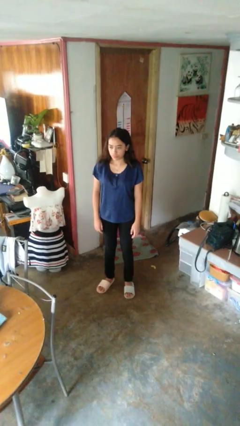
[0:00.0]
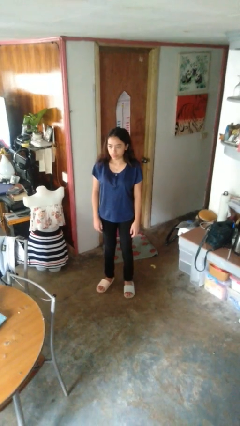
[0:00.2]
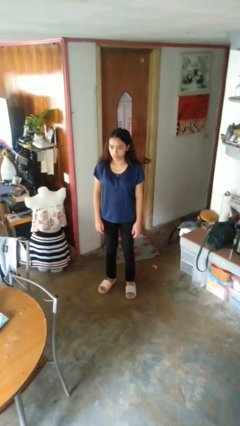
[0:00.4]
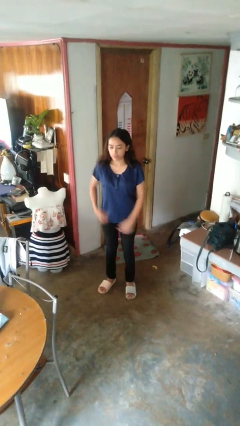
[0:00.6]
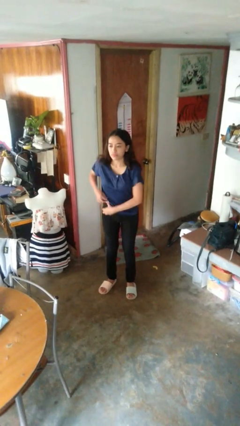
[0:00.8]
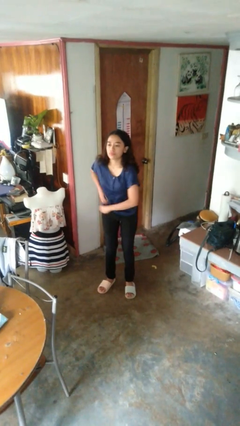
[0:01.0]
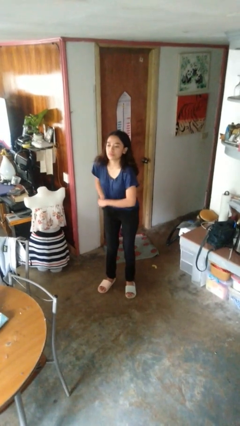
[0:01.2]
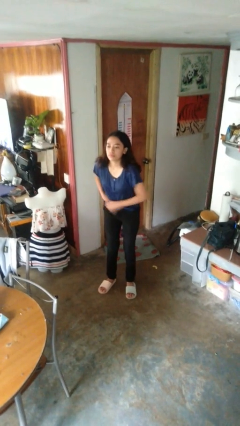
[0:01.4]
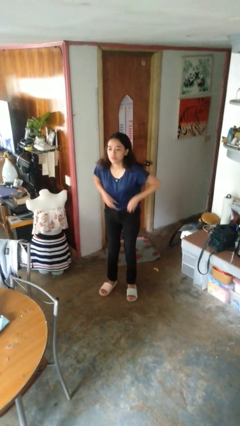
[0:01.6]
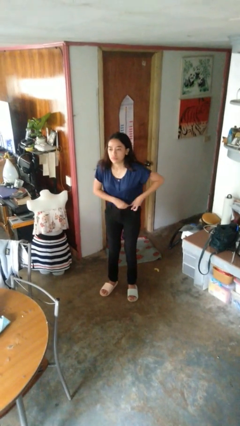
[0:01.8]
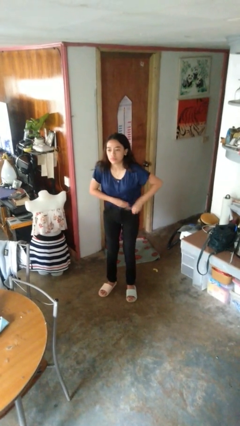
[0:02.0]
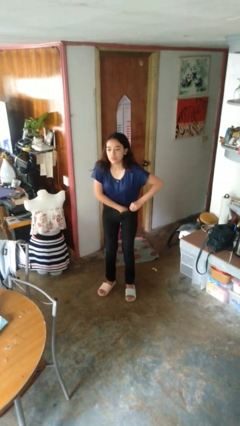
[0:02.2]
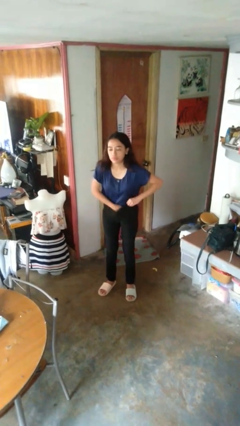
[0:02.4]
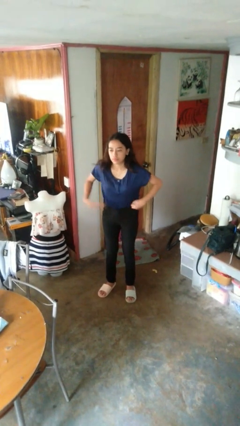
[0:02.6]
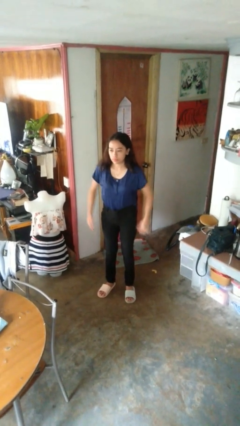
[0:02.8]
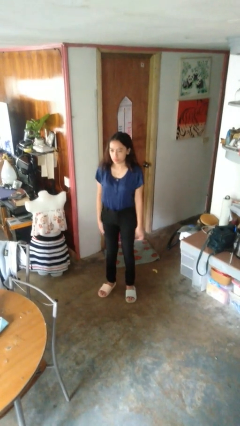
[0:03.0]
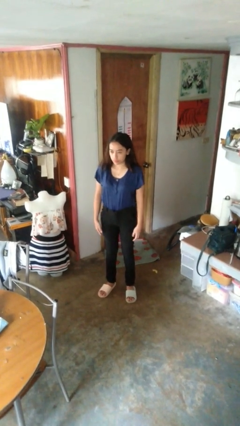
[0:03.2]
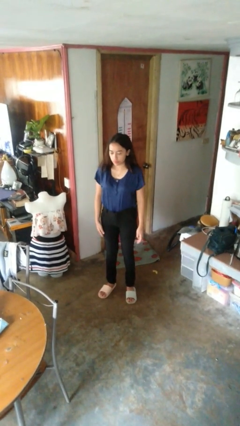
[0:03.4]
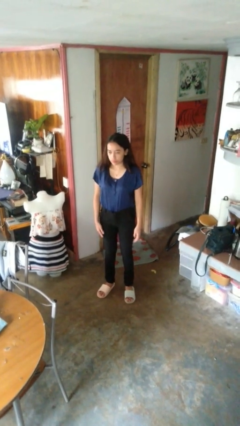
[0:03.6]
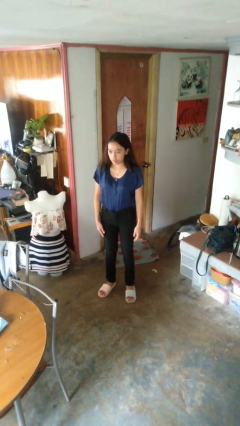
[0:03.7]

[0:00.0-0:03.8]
person tucks in shirt

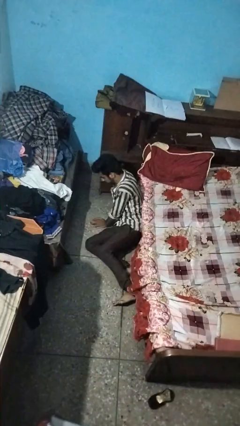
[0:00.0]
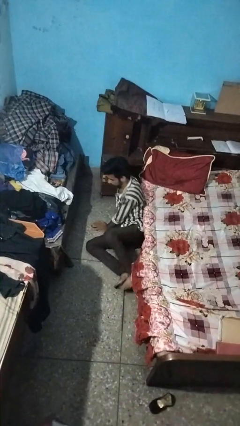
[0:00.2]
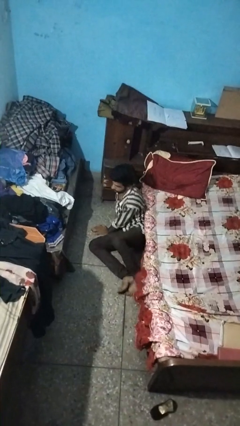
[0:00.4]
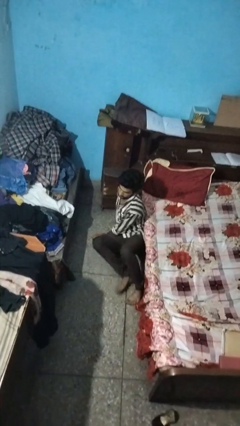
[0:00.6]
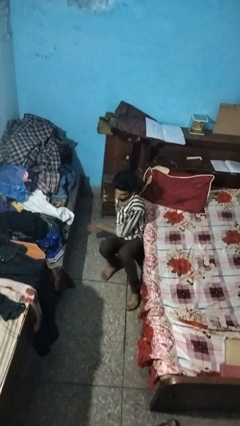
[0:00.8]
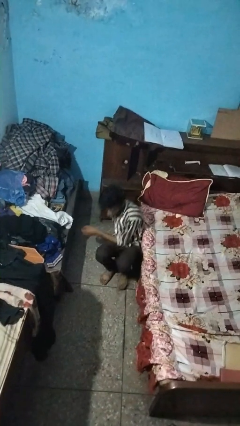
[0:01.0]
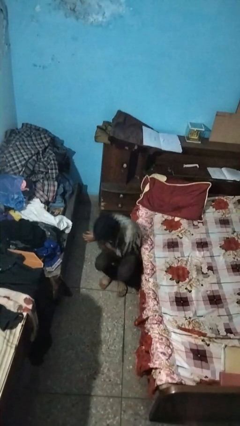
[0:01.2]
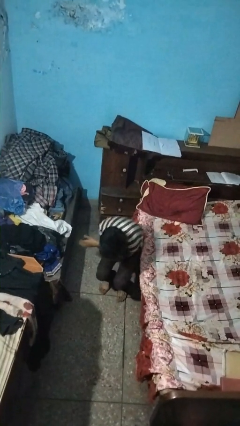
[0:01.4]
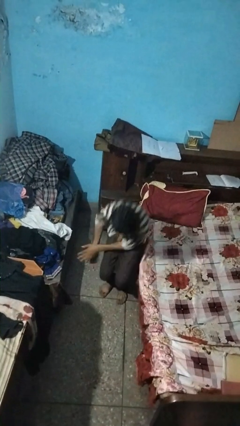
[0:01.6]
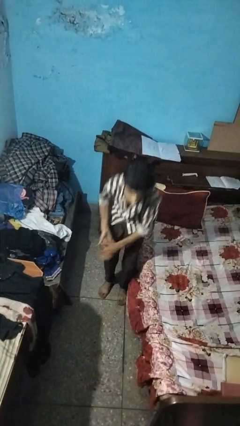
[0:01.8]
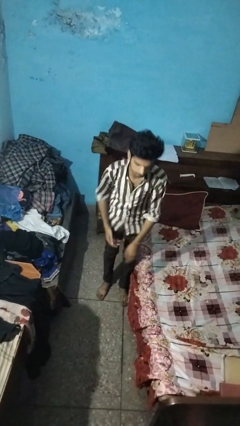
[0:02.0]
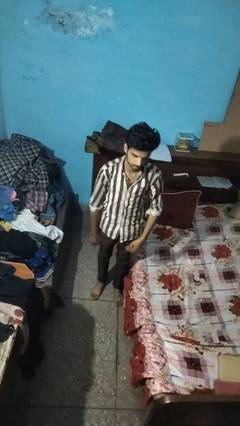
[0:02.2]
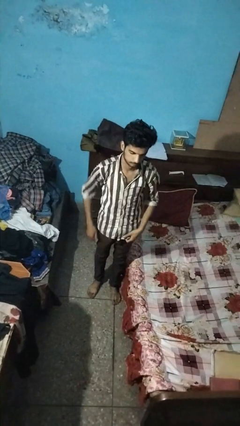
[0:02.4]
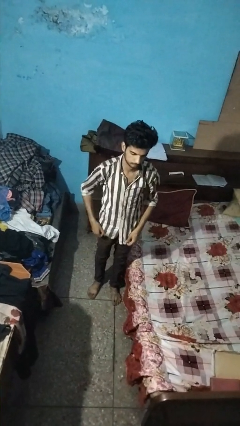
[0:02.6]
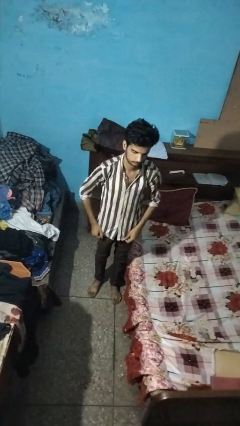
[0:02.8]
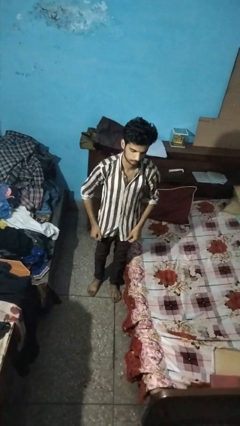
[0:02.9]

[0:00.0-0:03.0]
person stands up from floor

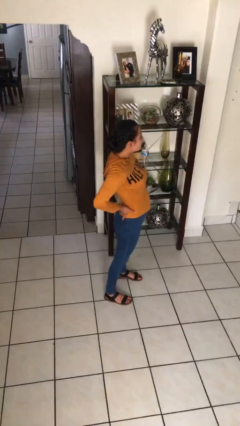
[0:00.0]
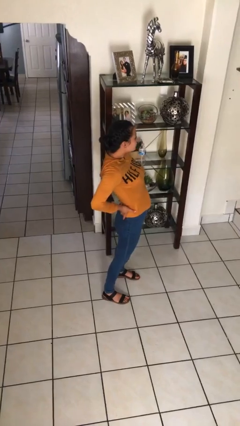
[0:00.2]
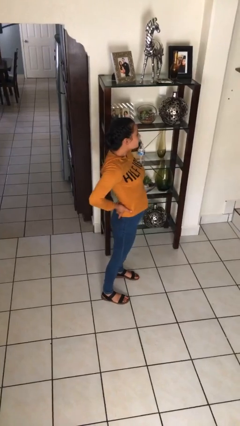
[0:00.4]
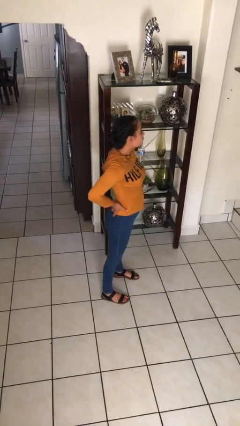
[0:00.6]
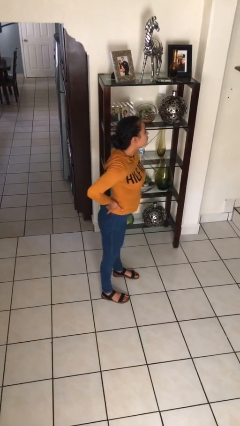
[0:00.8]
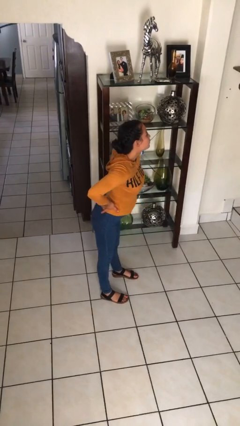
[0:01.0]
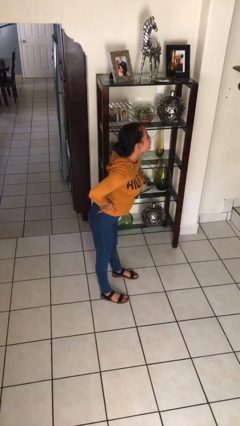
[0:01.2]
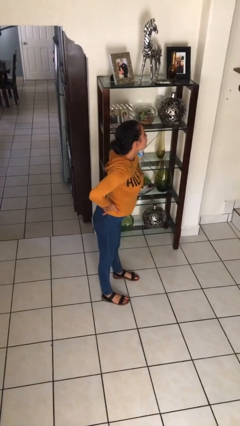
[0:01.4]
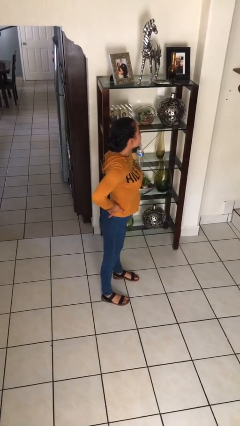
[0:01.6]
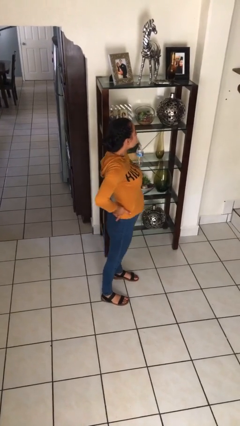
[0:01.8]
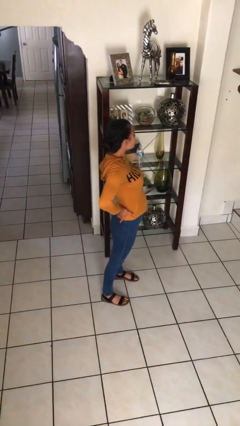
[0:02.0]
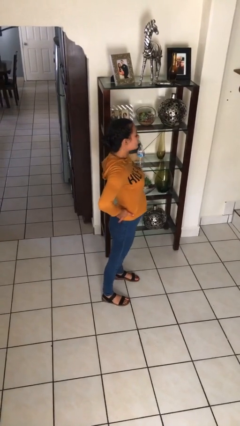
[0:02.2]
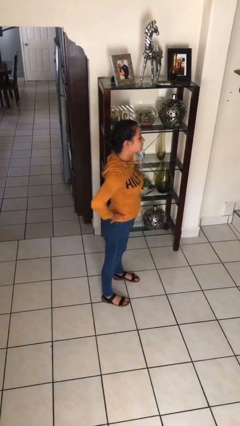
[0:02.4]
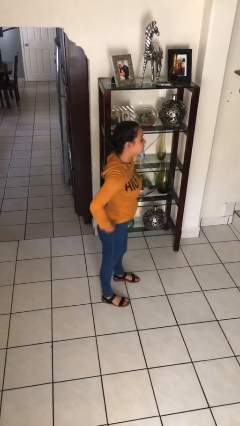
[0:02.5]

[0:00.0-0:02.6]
person wiggles hips

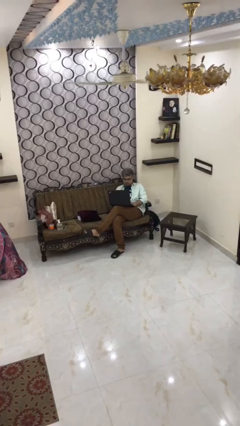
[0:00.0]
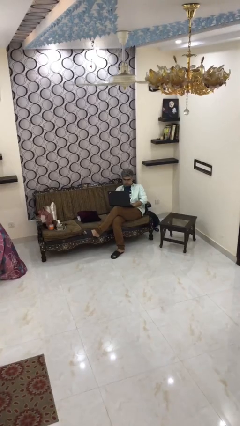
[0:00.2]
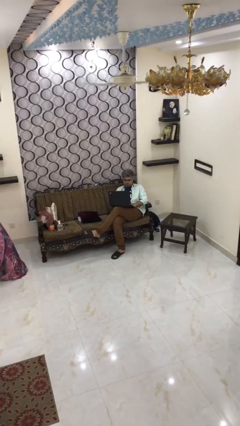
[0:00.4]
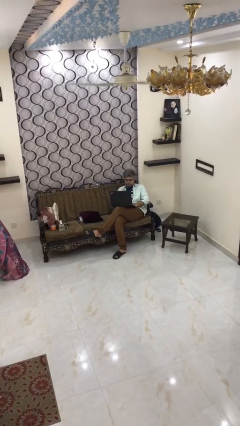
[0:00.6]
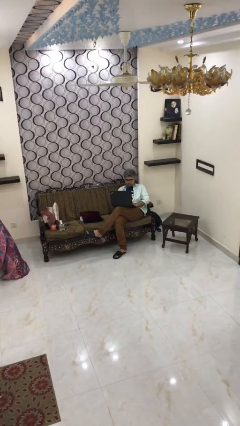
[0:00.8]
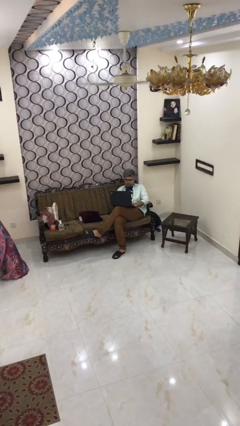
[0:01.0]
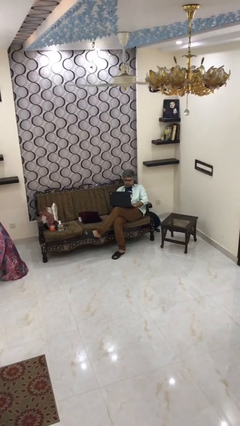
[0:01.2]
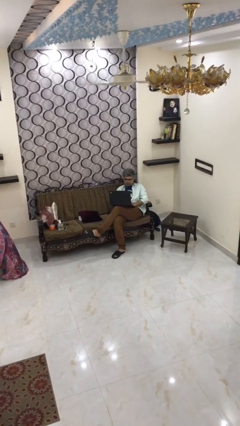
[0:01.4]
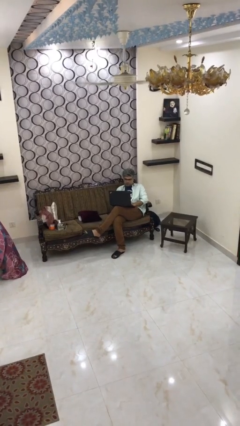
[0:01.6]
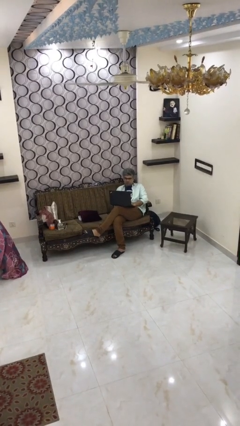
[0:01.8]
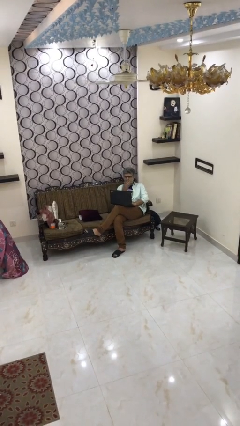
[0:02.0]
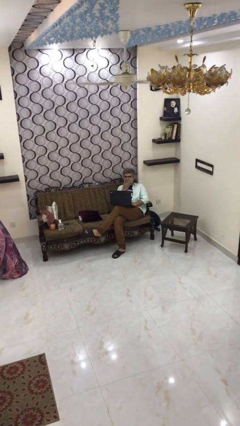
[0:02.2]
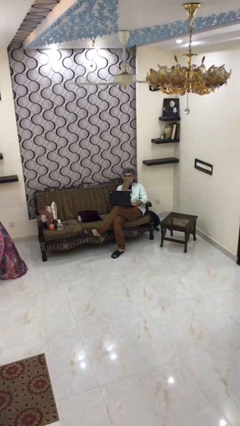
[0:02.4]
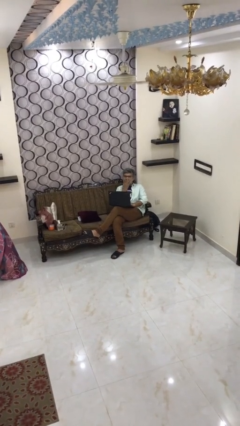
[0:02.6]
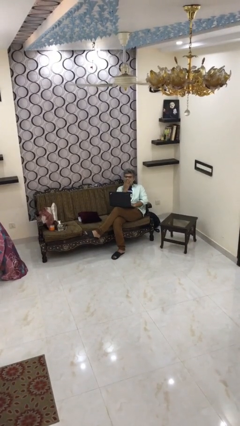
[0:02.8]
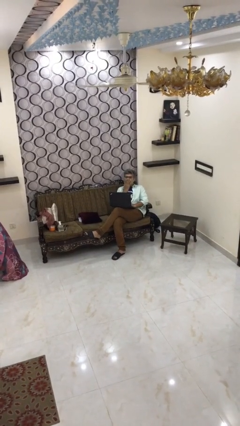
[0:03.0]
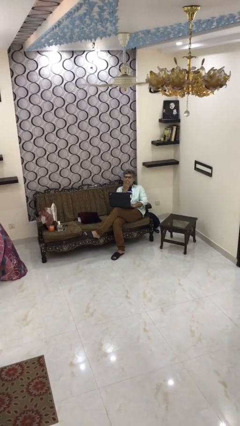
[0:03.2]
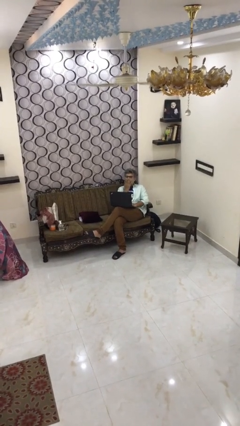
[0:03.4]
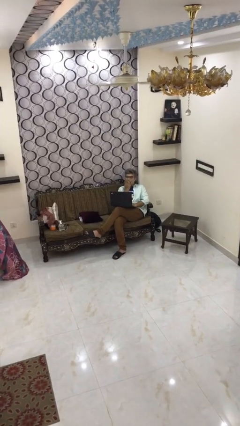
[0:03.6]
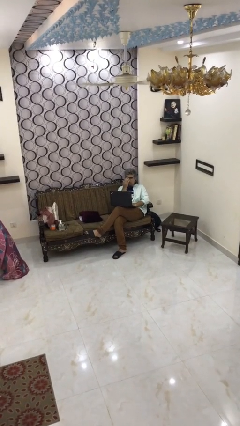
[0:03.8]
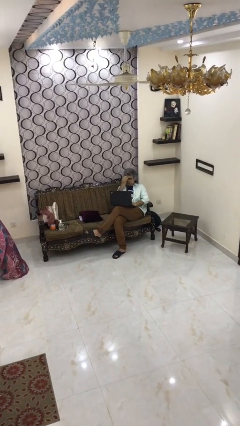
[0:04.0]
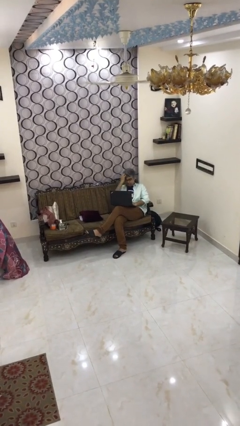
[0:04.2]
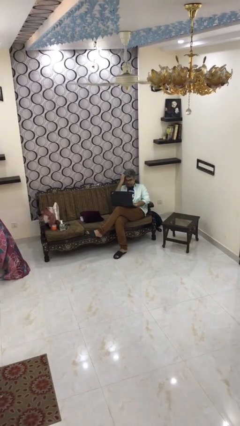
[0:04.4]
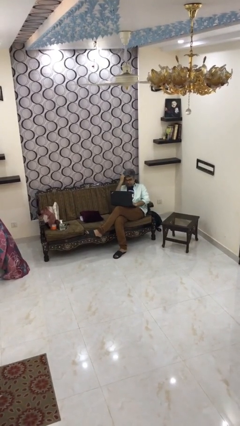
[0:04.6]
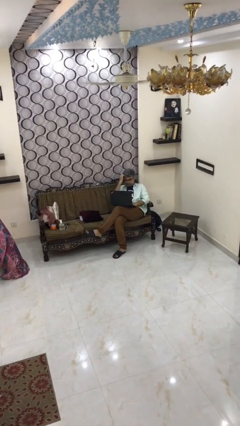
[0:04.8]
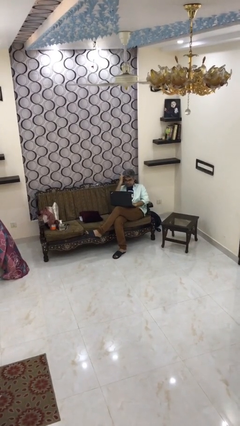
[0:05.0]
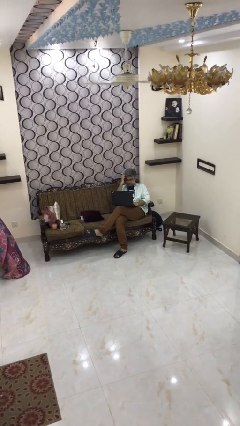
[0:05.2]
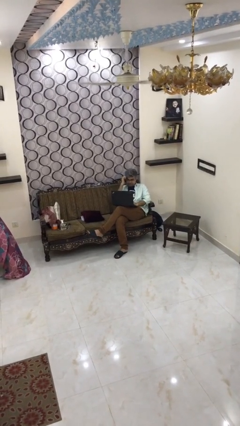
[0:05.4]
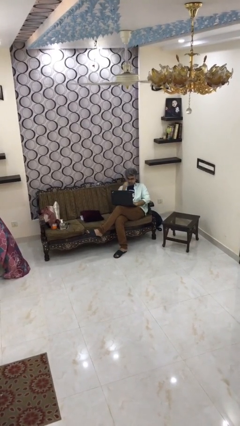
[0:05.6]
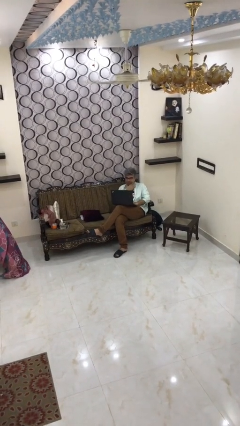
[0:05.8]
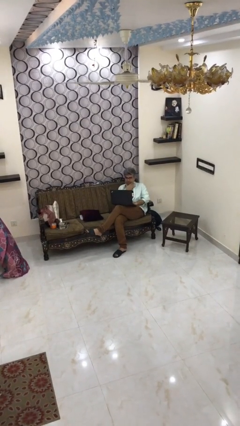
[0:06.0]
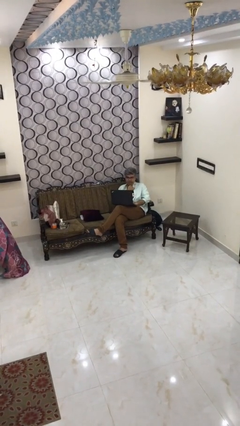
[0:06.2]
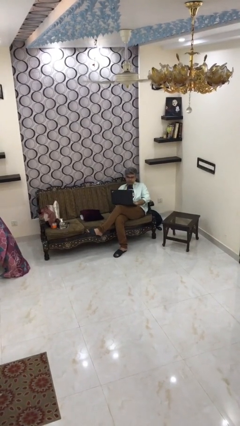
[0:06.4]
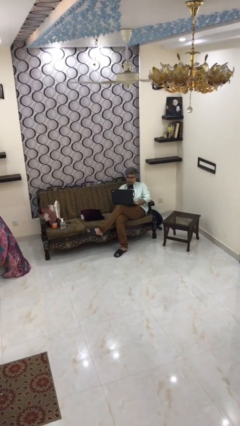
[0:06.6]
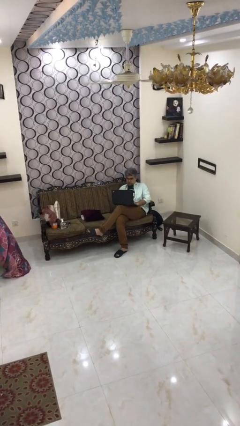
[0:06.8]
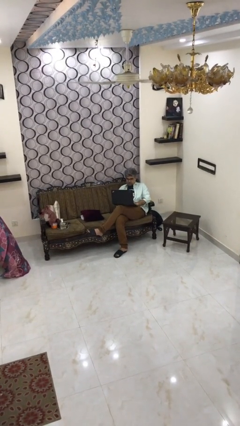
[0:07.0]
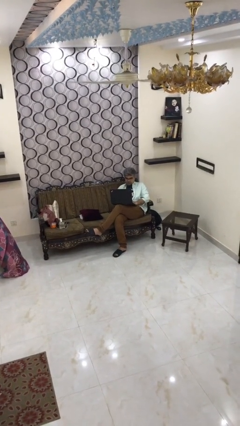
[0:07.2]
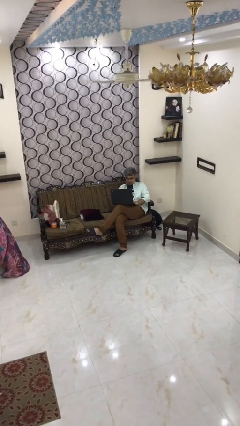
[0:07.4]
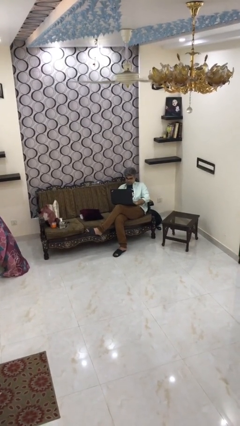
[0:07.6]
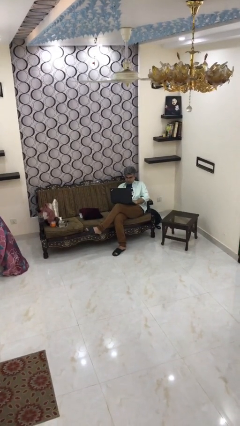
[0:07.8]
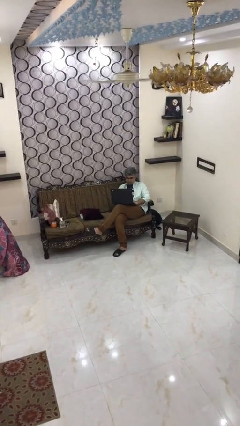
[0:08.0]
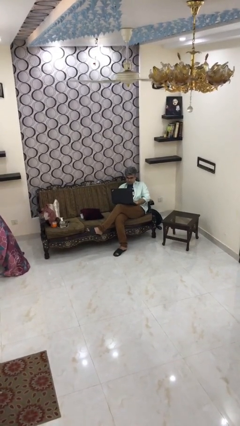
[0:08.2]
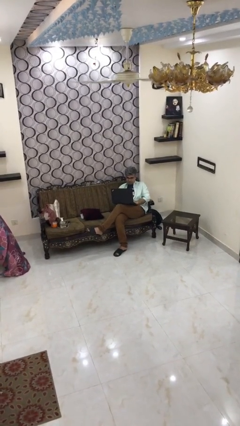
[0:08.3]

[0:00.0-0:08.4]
person interacts with laptop

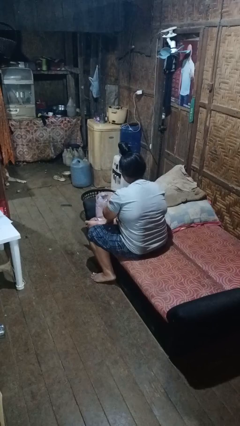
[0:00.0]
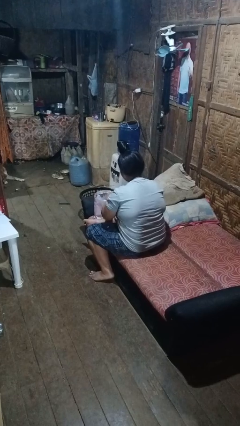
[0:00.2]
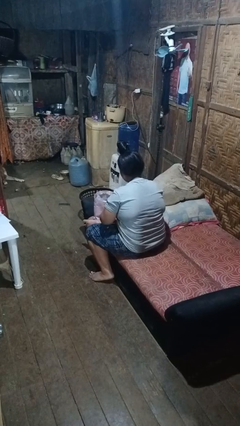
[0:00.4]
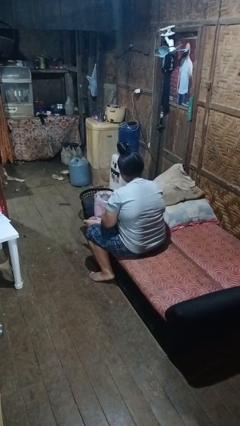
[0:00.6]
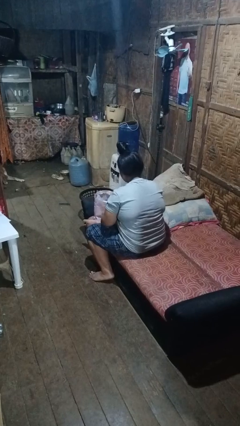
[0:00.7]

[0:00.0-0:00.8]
person puts object into bag
